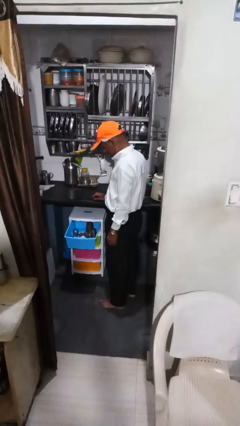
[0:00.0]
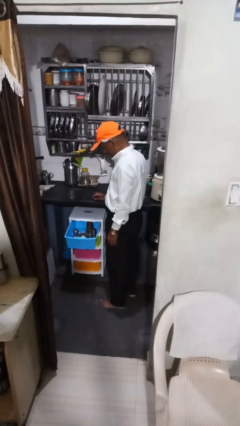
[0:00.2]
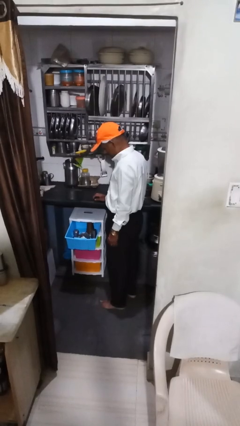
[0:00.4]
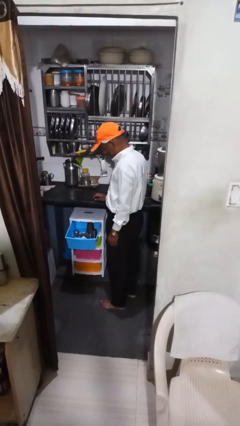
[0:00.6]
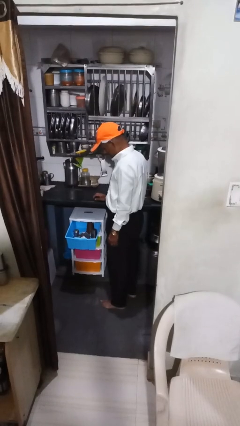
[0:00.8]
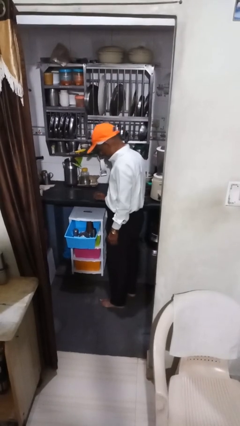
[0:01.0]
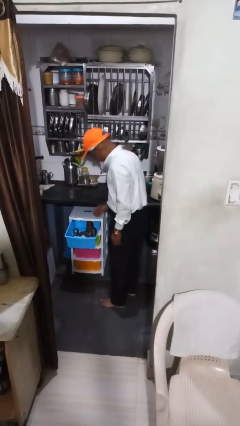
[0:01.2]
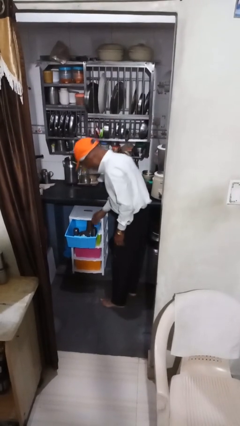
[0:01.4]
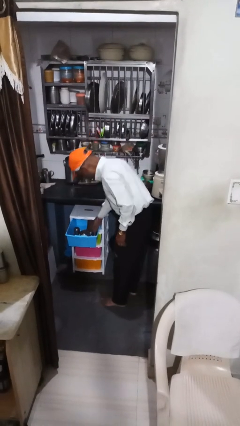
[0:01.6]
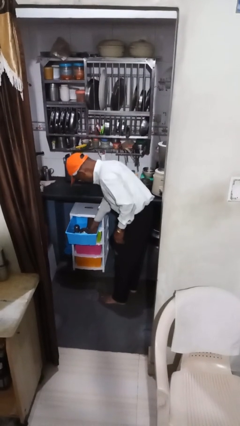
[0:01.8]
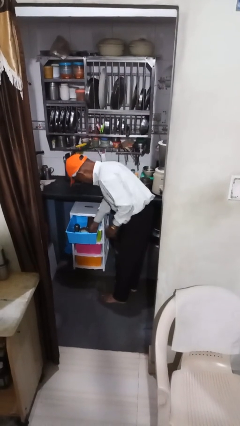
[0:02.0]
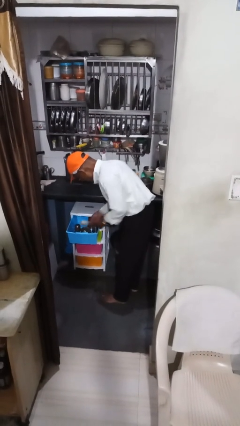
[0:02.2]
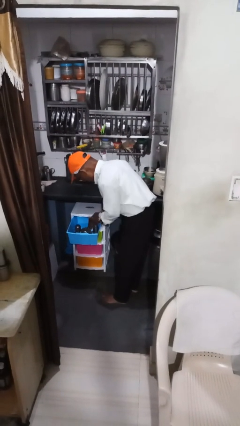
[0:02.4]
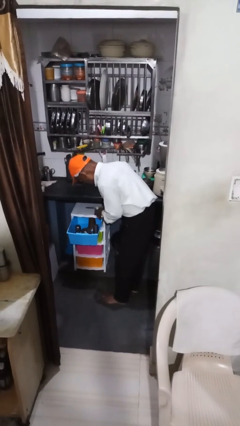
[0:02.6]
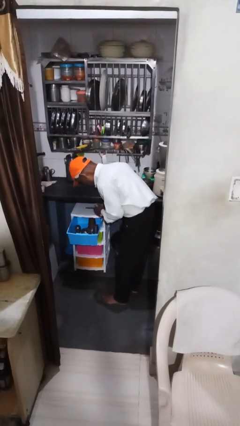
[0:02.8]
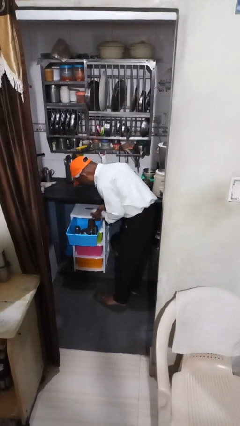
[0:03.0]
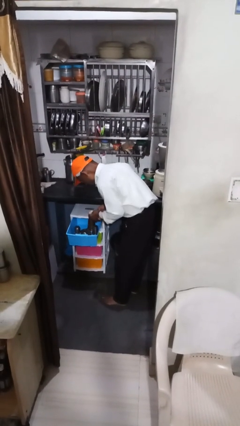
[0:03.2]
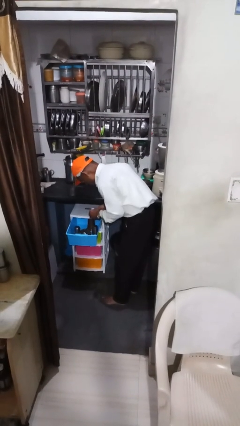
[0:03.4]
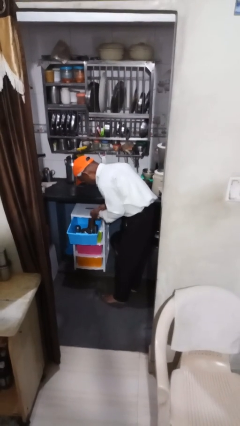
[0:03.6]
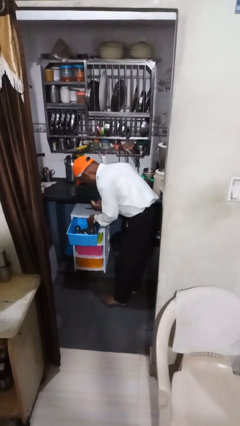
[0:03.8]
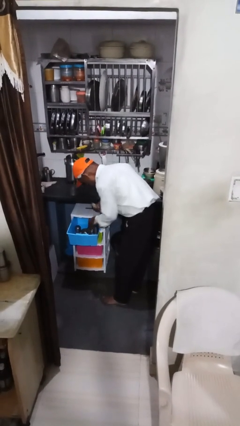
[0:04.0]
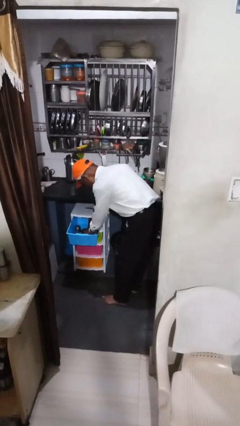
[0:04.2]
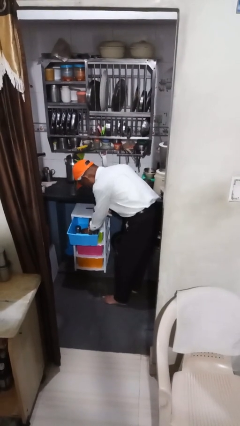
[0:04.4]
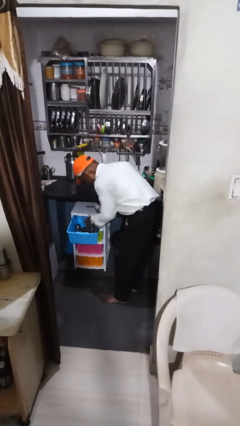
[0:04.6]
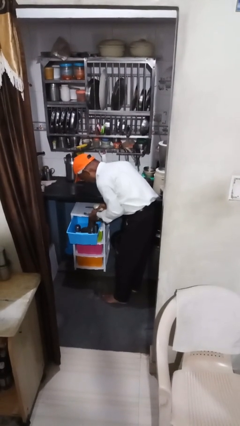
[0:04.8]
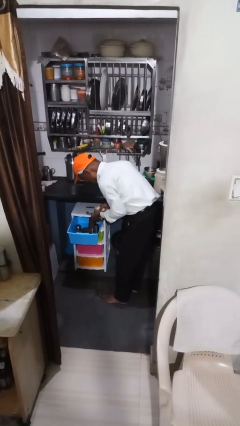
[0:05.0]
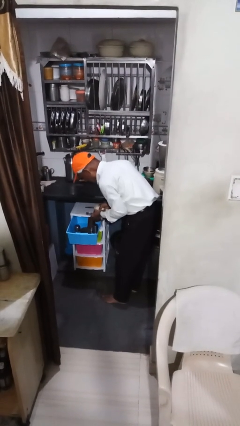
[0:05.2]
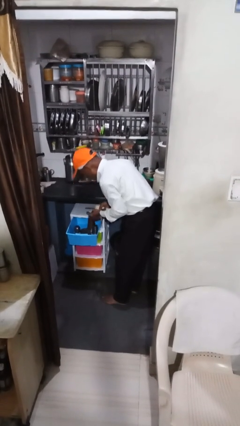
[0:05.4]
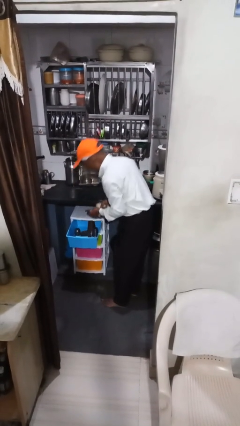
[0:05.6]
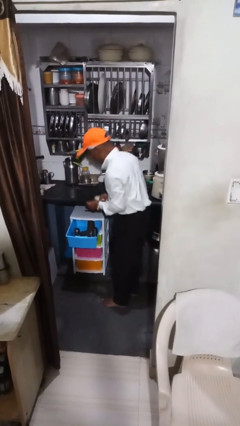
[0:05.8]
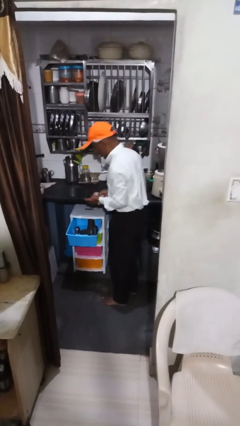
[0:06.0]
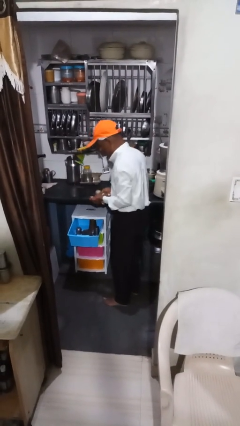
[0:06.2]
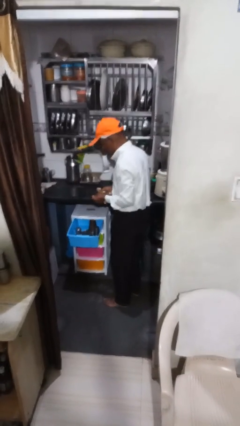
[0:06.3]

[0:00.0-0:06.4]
person takes object from kitchen drawer

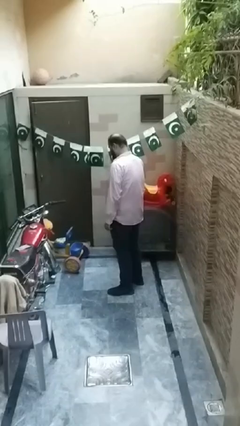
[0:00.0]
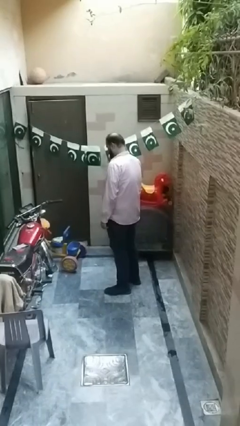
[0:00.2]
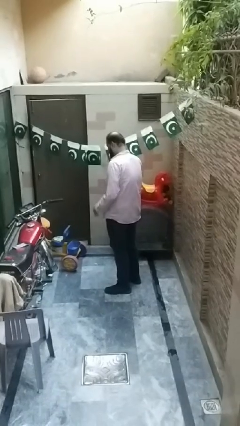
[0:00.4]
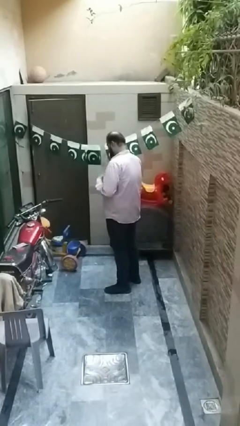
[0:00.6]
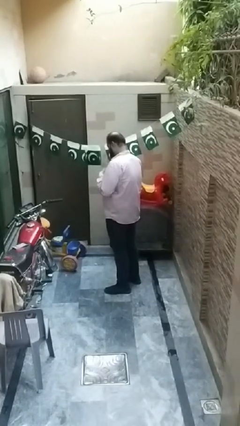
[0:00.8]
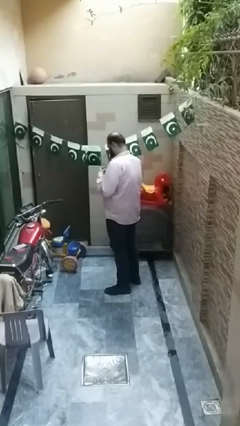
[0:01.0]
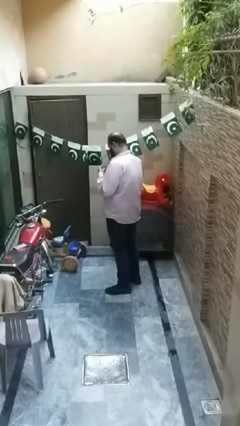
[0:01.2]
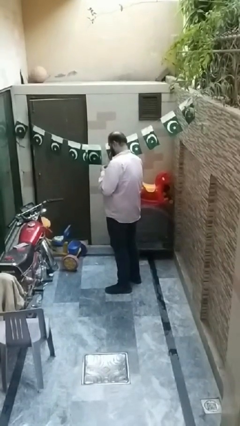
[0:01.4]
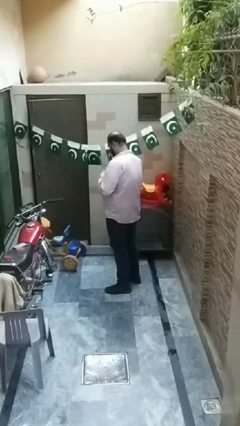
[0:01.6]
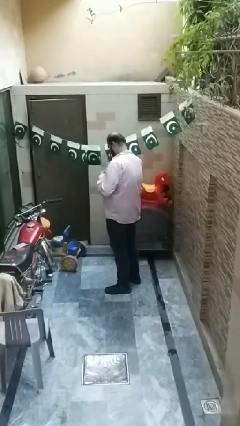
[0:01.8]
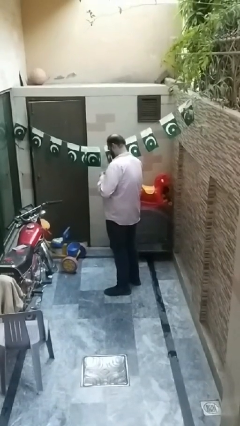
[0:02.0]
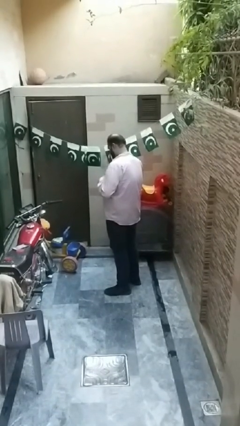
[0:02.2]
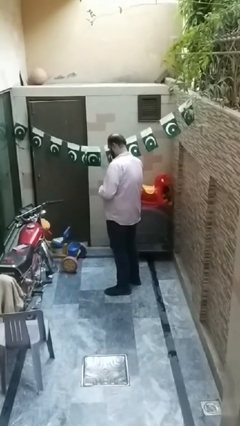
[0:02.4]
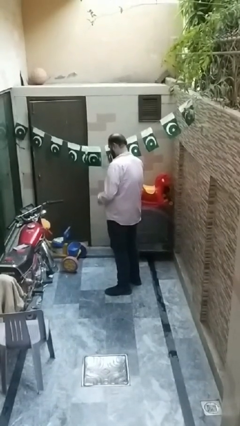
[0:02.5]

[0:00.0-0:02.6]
person buttons shirt

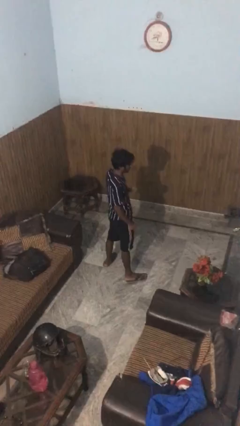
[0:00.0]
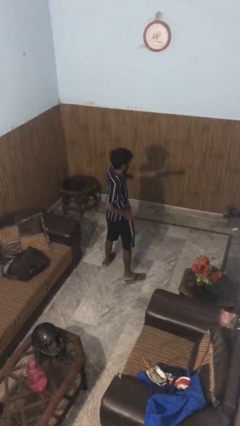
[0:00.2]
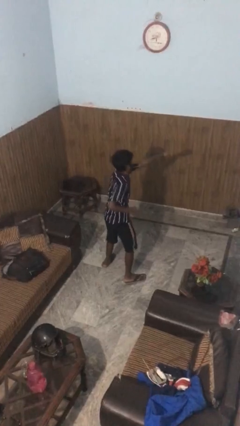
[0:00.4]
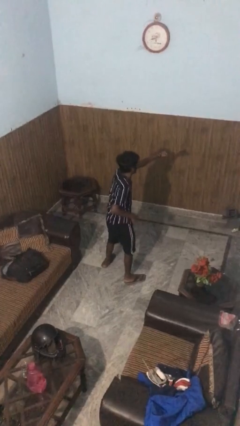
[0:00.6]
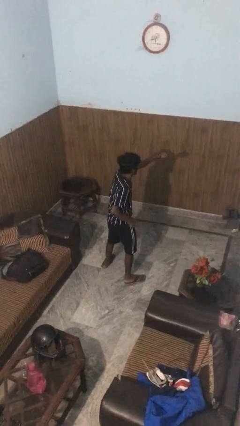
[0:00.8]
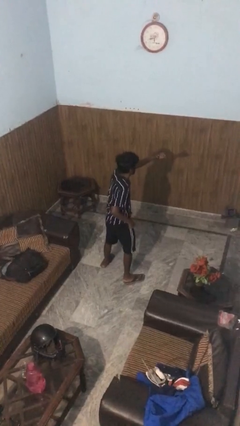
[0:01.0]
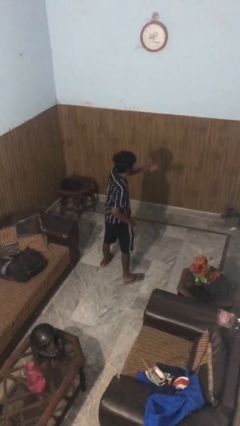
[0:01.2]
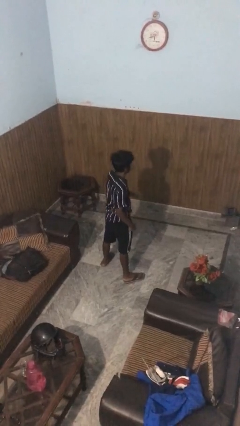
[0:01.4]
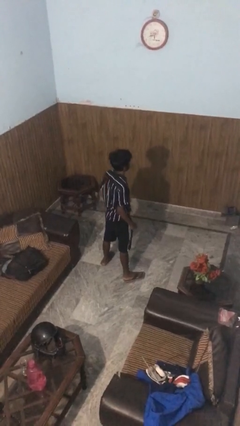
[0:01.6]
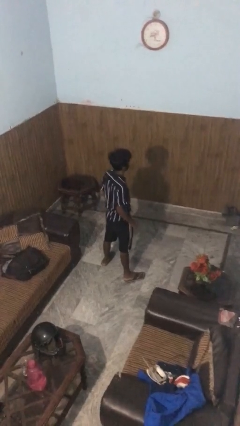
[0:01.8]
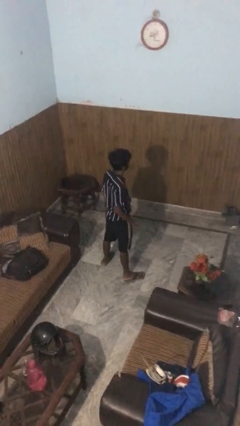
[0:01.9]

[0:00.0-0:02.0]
person punches

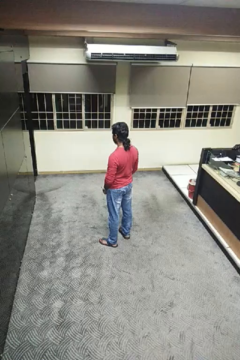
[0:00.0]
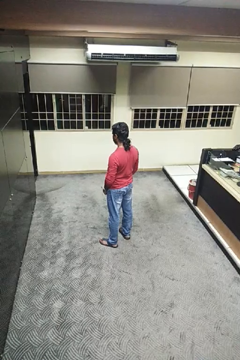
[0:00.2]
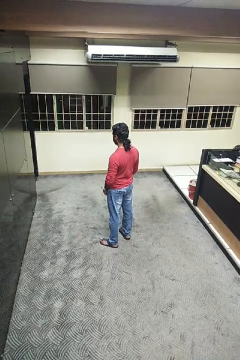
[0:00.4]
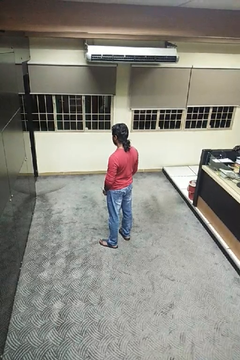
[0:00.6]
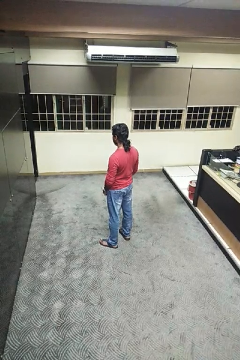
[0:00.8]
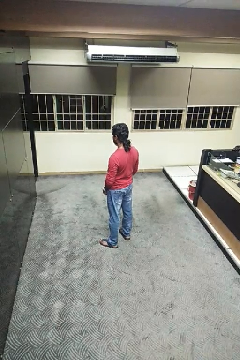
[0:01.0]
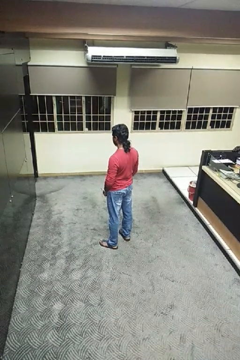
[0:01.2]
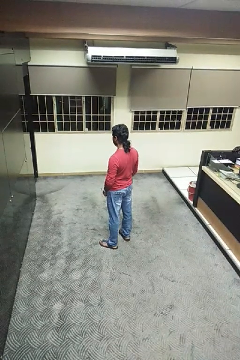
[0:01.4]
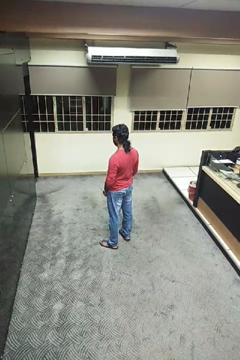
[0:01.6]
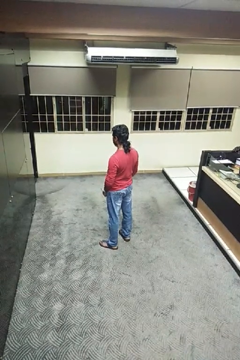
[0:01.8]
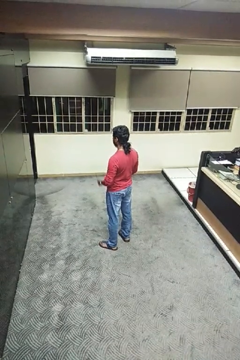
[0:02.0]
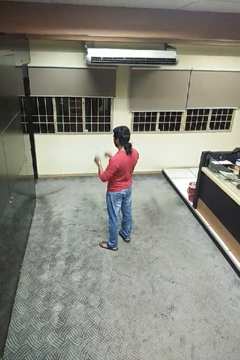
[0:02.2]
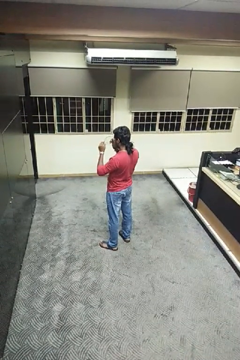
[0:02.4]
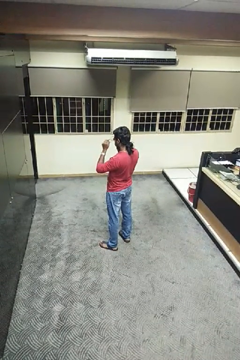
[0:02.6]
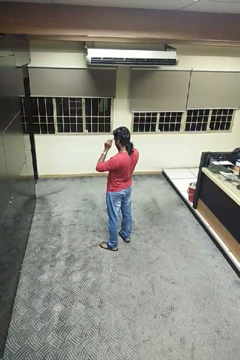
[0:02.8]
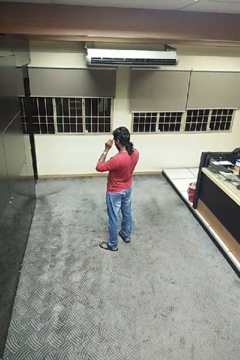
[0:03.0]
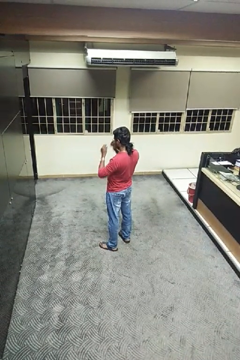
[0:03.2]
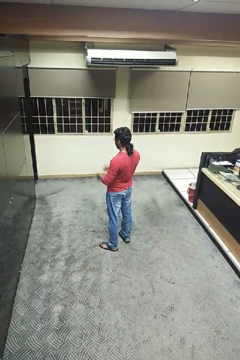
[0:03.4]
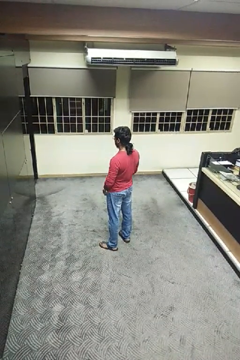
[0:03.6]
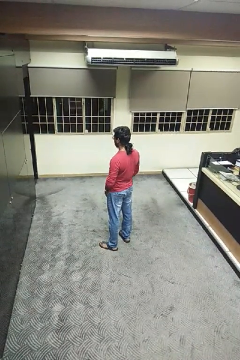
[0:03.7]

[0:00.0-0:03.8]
person puts on glasses

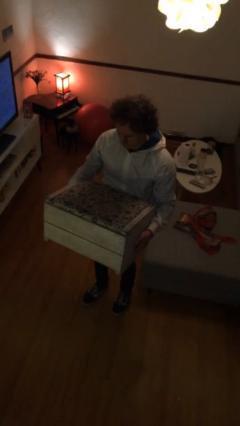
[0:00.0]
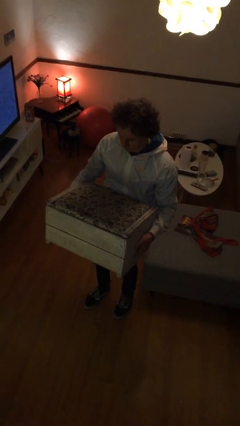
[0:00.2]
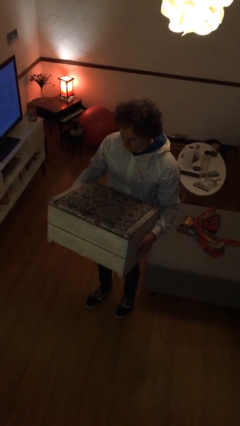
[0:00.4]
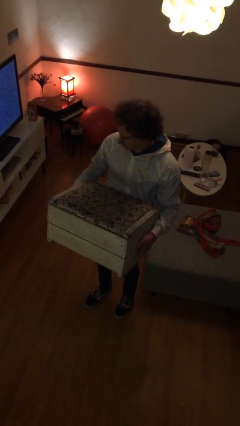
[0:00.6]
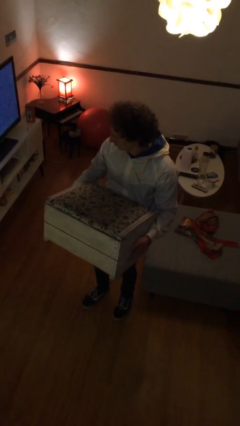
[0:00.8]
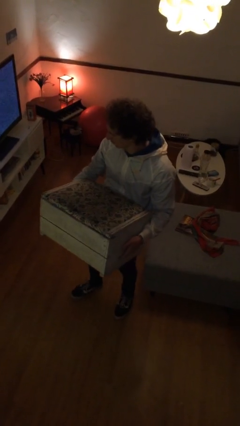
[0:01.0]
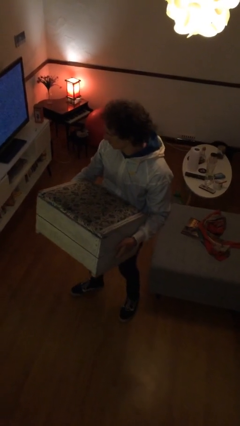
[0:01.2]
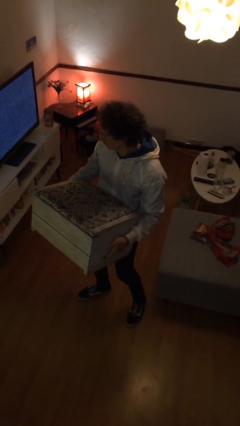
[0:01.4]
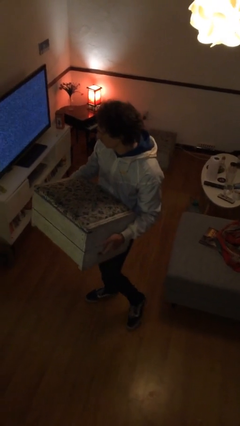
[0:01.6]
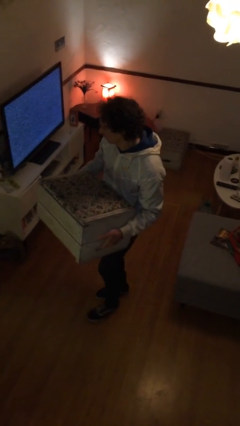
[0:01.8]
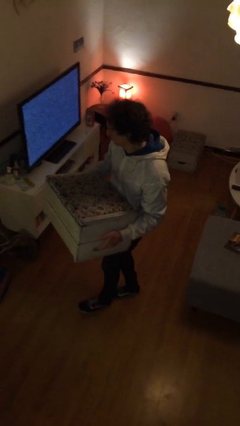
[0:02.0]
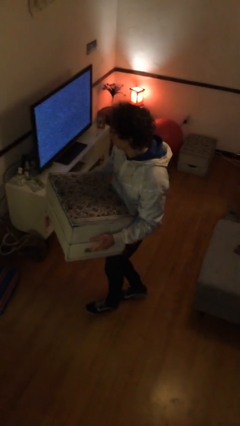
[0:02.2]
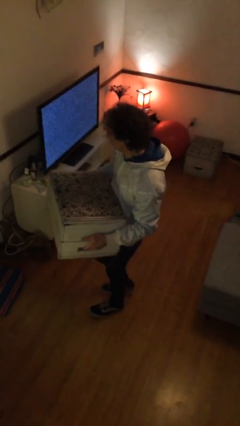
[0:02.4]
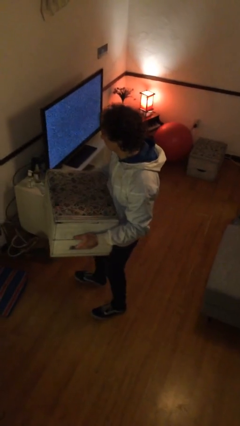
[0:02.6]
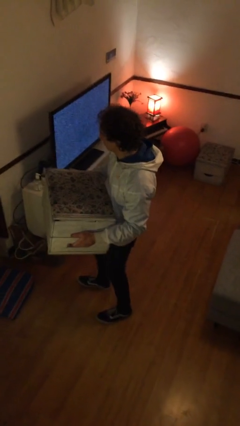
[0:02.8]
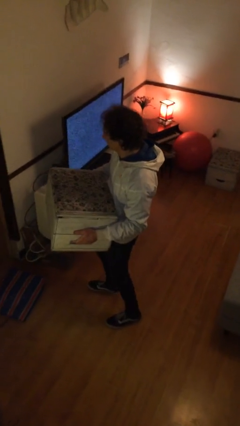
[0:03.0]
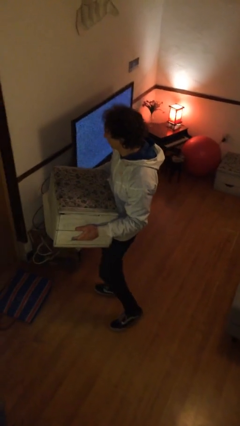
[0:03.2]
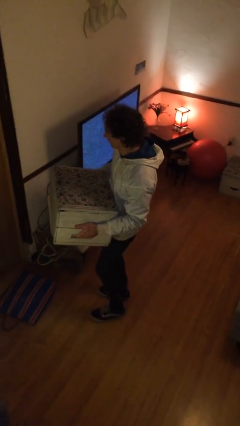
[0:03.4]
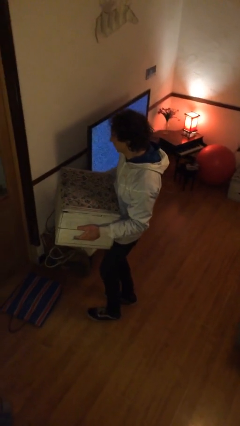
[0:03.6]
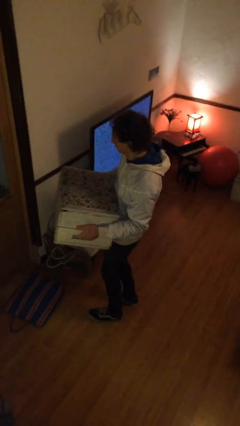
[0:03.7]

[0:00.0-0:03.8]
person carries furniture
